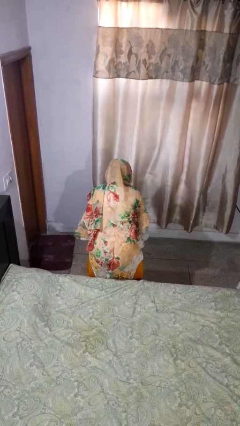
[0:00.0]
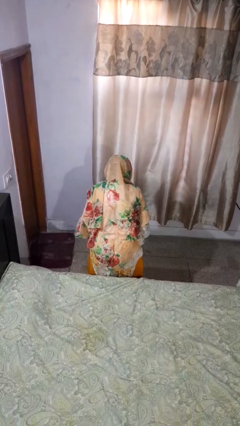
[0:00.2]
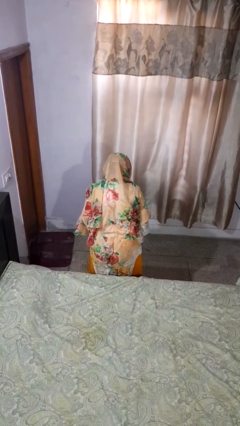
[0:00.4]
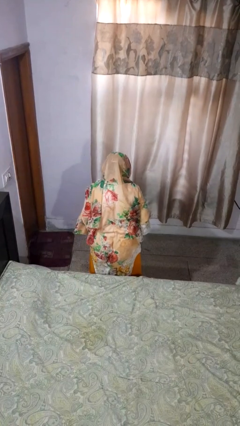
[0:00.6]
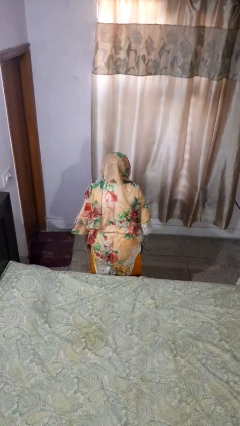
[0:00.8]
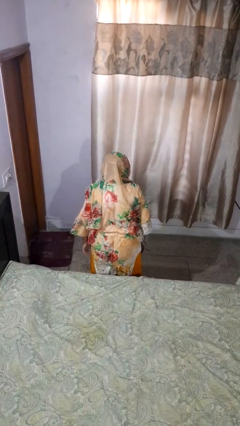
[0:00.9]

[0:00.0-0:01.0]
person picks up object from floor

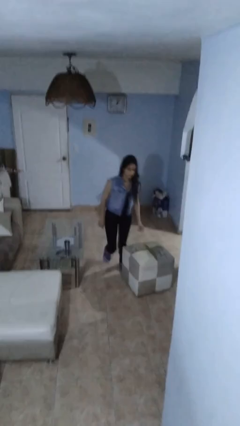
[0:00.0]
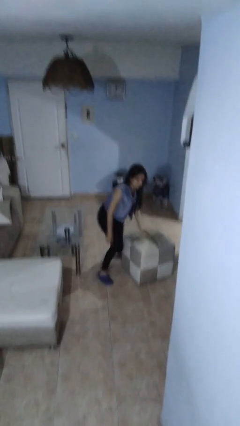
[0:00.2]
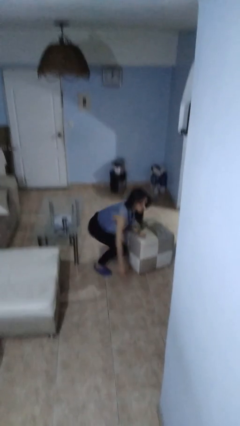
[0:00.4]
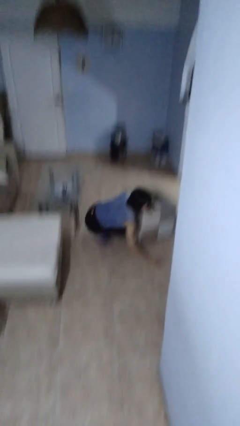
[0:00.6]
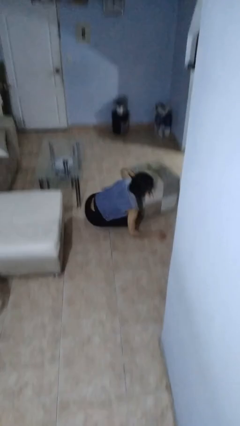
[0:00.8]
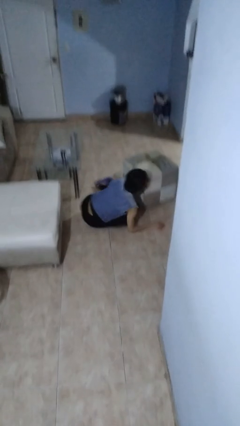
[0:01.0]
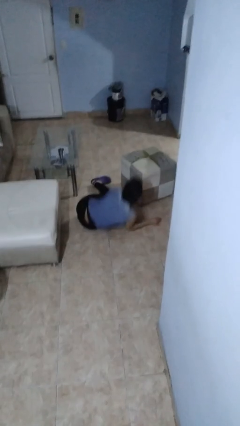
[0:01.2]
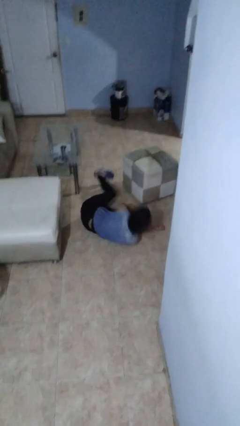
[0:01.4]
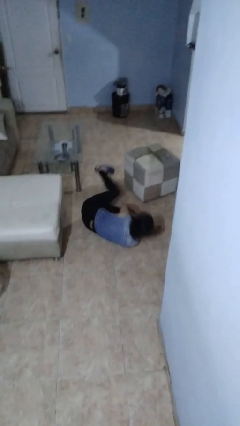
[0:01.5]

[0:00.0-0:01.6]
person lies down on floor

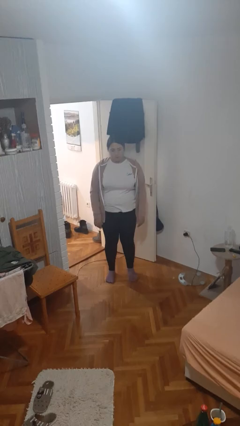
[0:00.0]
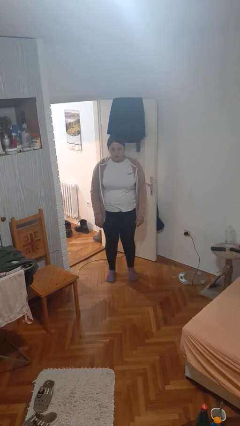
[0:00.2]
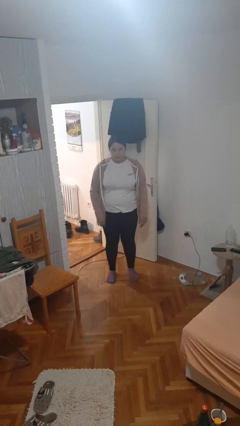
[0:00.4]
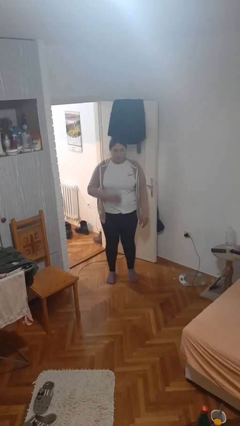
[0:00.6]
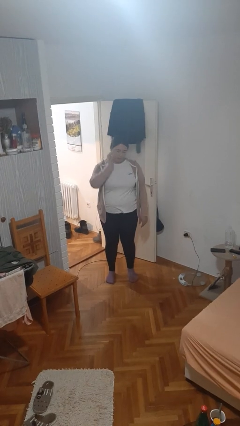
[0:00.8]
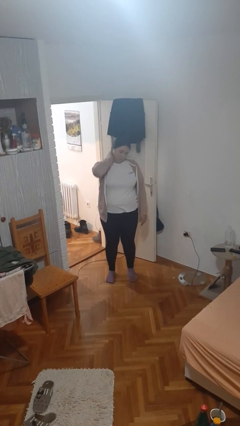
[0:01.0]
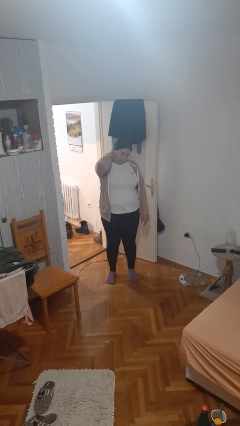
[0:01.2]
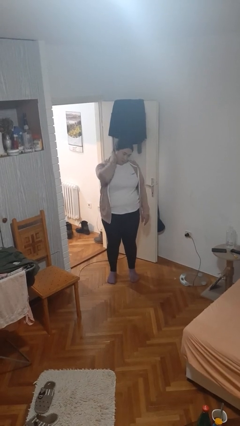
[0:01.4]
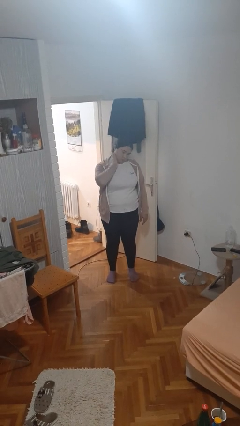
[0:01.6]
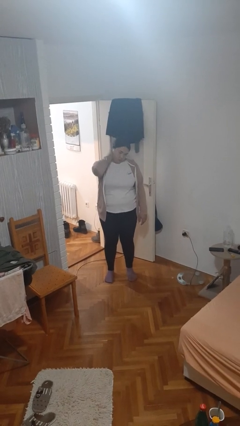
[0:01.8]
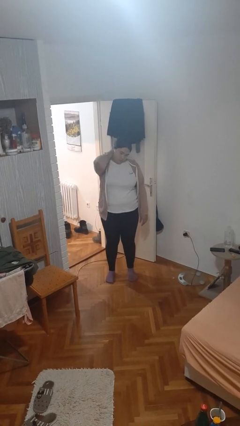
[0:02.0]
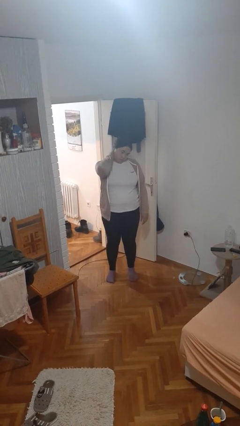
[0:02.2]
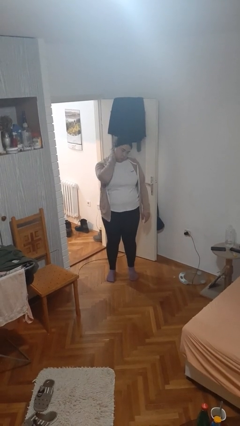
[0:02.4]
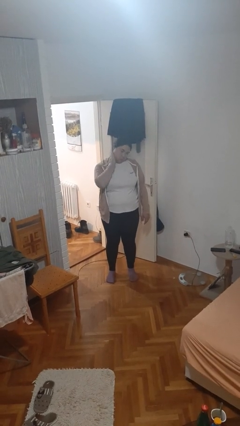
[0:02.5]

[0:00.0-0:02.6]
person rubs neck

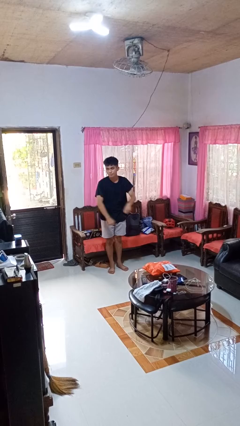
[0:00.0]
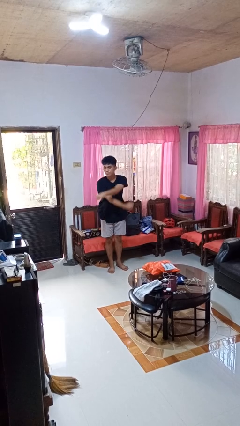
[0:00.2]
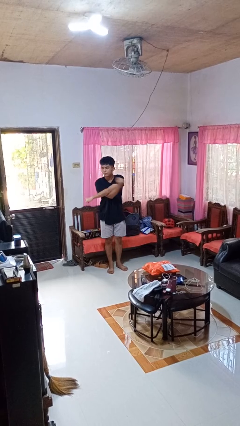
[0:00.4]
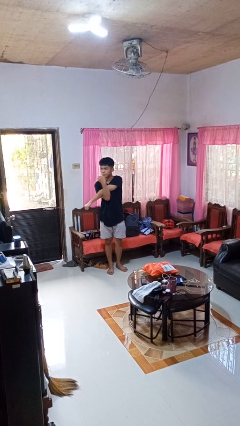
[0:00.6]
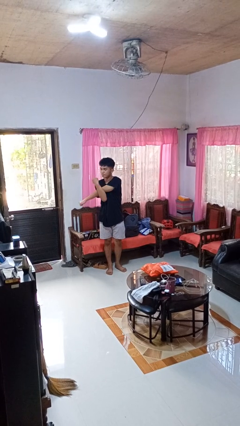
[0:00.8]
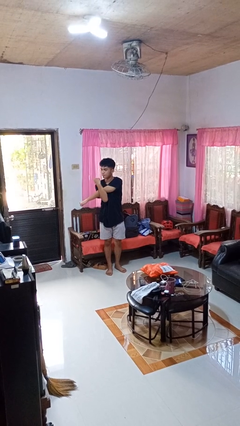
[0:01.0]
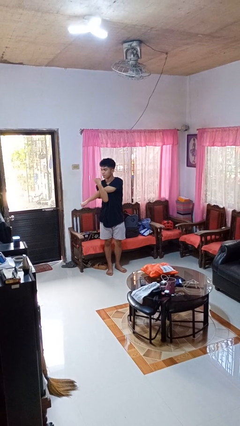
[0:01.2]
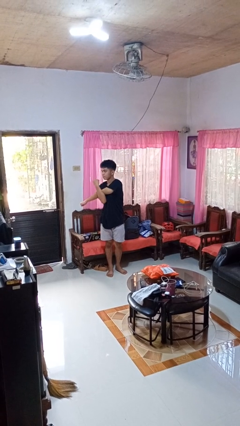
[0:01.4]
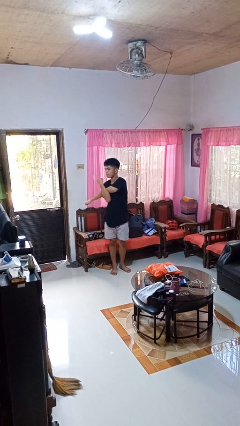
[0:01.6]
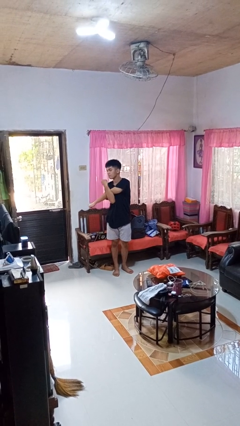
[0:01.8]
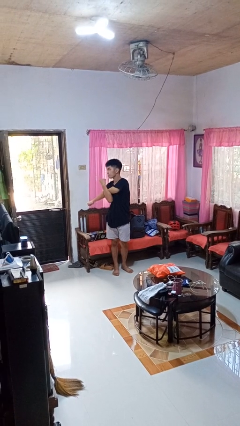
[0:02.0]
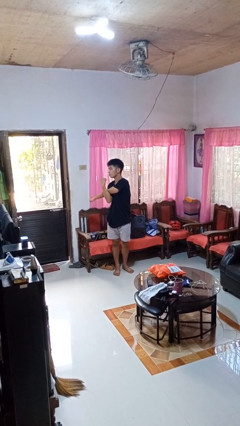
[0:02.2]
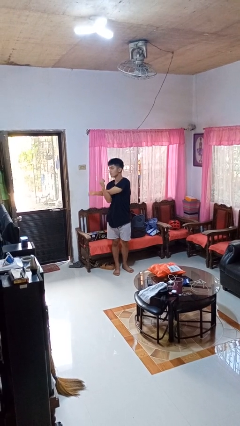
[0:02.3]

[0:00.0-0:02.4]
person stretches arms to side

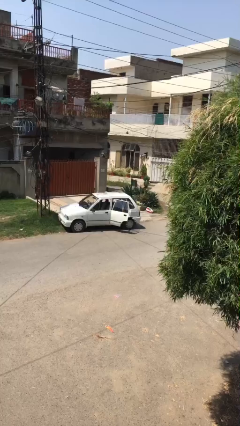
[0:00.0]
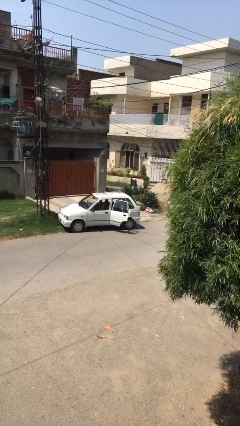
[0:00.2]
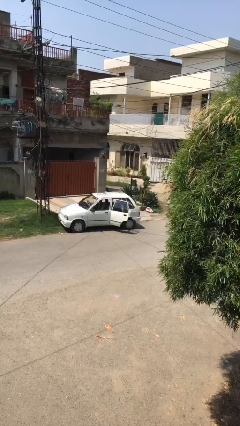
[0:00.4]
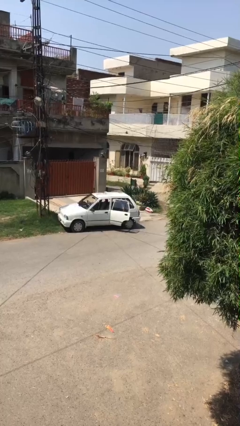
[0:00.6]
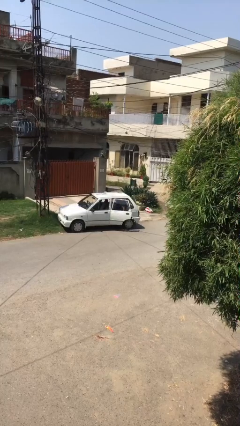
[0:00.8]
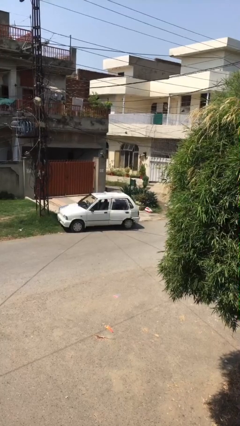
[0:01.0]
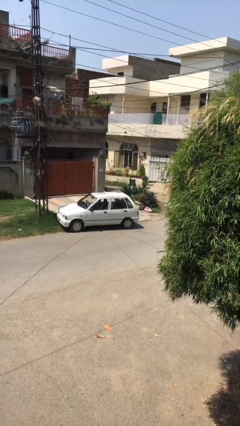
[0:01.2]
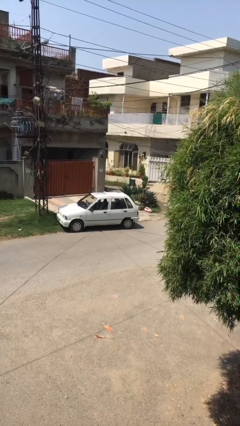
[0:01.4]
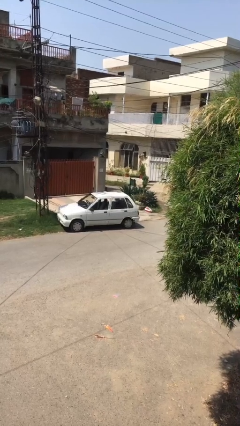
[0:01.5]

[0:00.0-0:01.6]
person closes car door

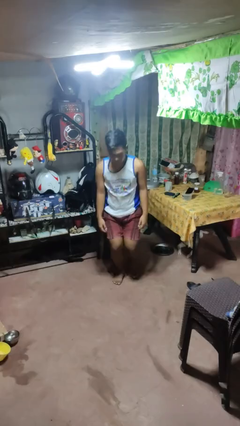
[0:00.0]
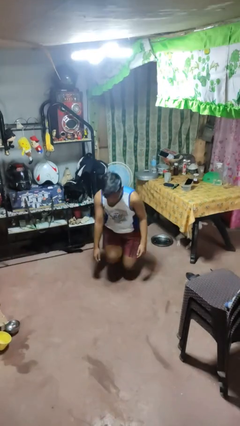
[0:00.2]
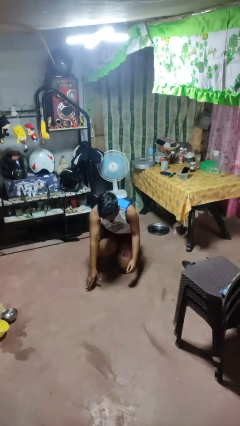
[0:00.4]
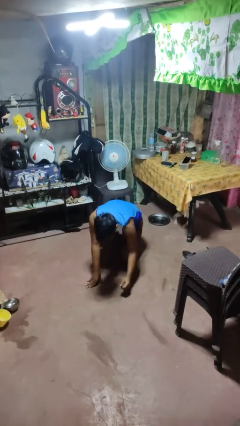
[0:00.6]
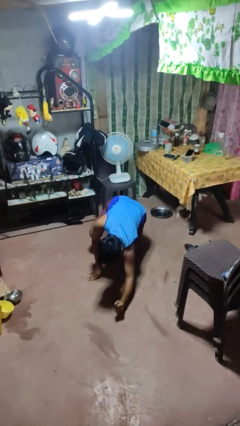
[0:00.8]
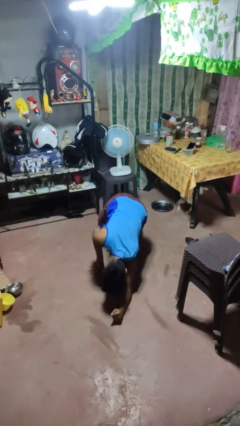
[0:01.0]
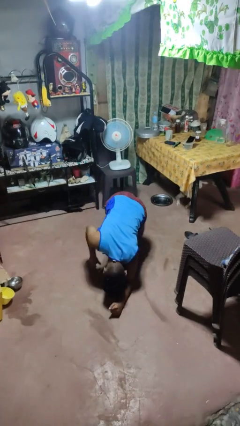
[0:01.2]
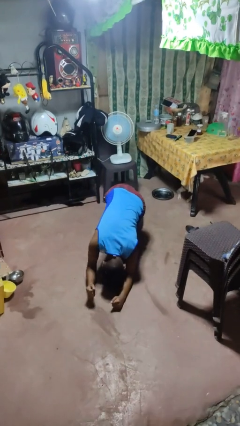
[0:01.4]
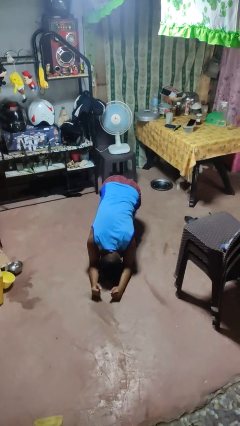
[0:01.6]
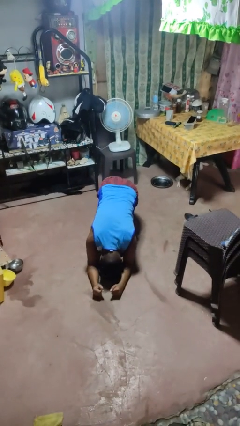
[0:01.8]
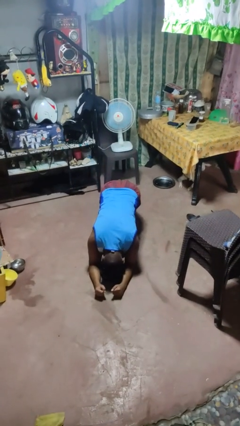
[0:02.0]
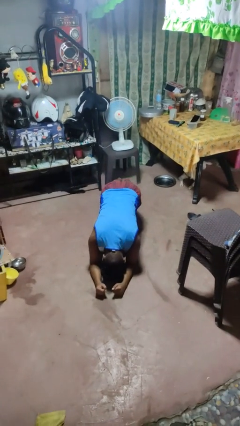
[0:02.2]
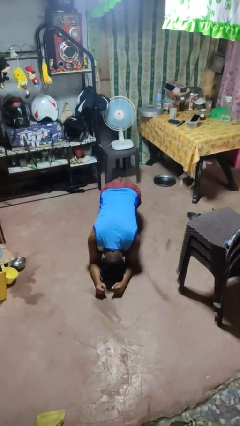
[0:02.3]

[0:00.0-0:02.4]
person exercises with plank

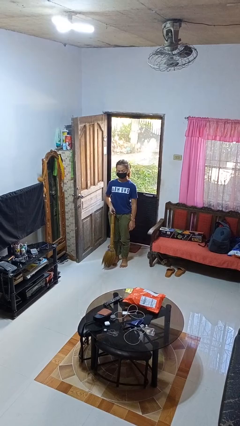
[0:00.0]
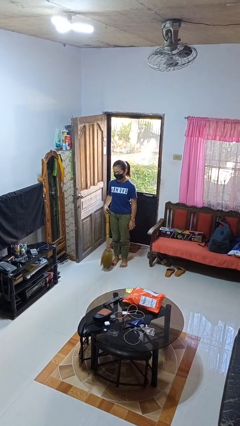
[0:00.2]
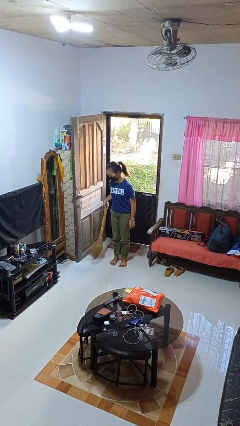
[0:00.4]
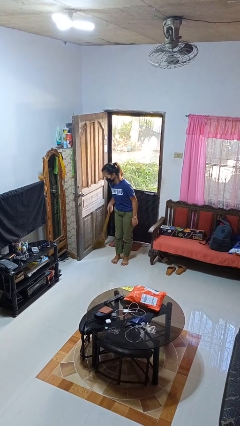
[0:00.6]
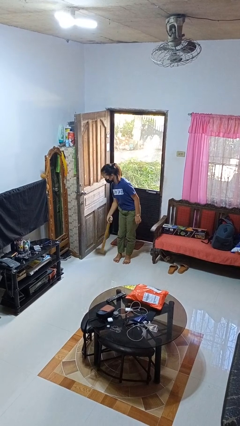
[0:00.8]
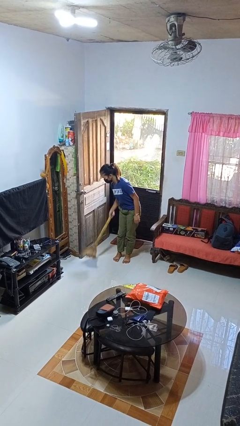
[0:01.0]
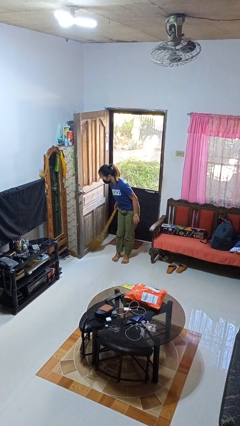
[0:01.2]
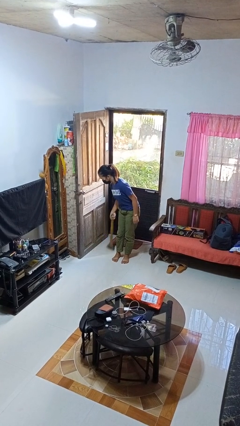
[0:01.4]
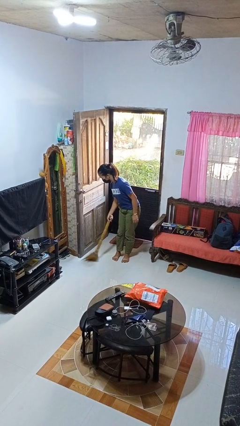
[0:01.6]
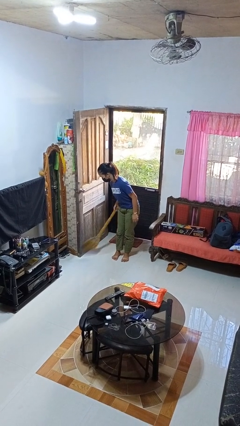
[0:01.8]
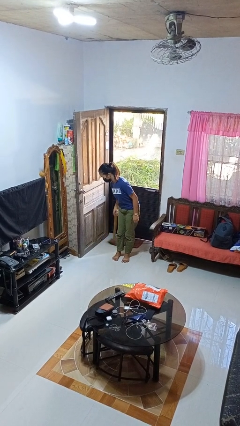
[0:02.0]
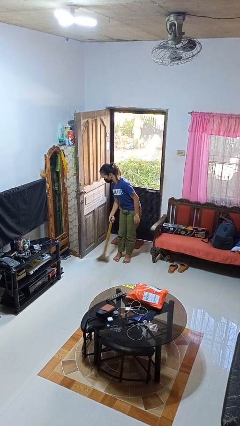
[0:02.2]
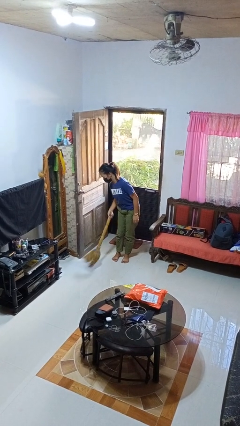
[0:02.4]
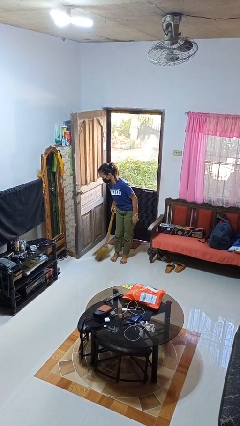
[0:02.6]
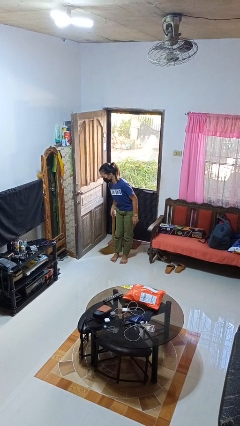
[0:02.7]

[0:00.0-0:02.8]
person sweeps floor

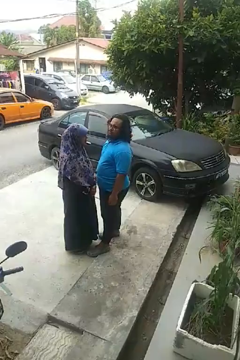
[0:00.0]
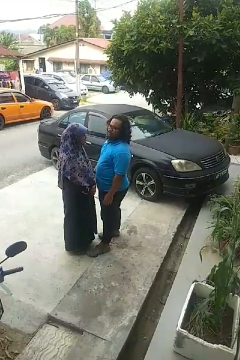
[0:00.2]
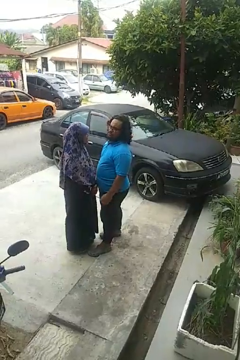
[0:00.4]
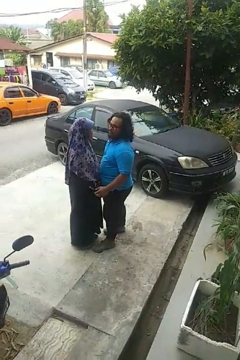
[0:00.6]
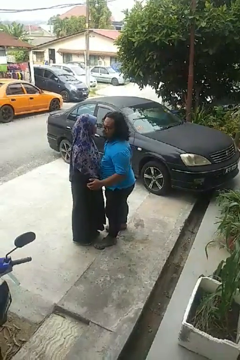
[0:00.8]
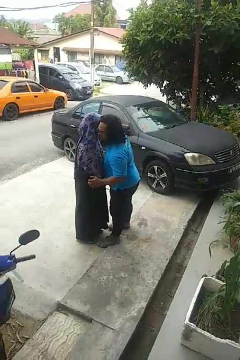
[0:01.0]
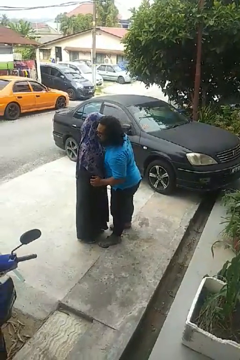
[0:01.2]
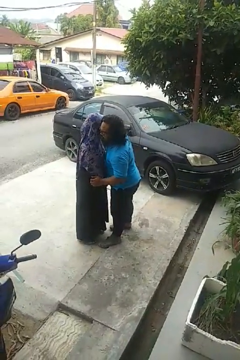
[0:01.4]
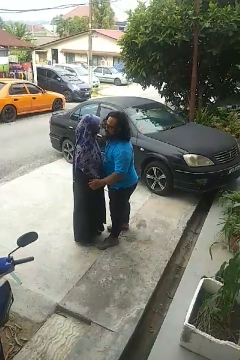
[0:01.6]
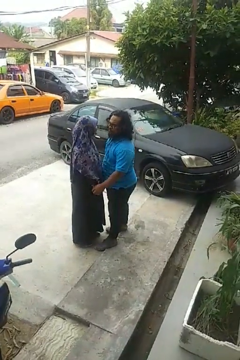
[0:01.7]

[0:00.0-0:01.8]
person kisses cheek of person

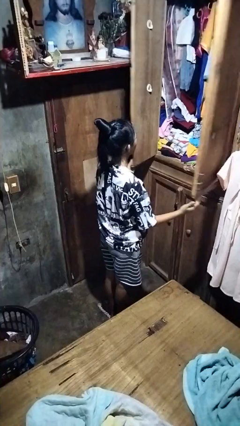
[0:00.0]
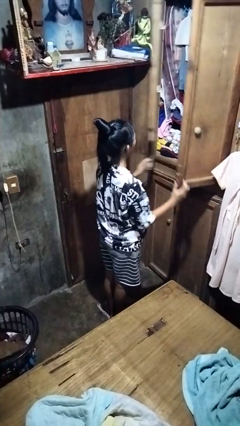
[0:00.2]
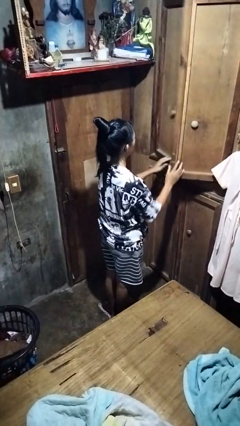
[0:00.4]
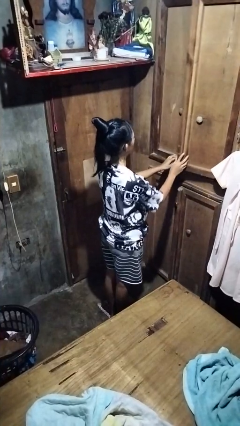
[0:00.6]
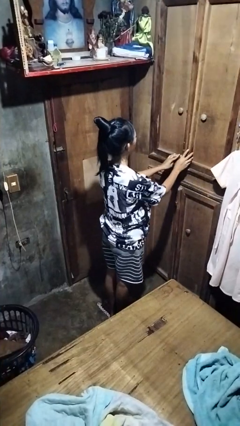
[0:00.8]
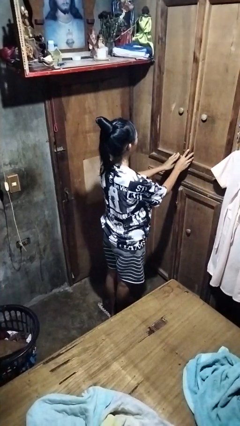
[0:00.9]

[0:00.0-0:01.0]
person closes closet door
